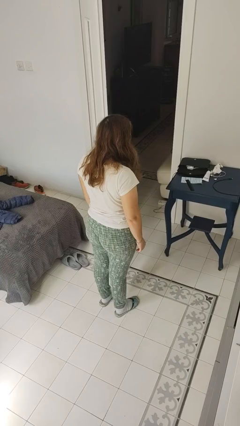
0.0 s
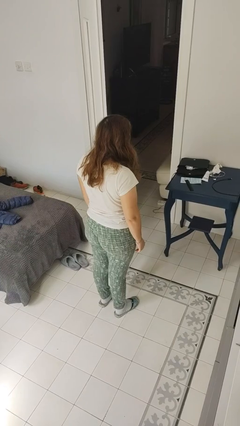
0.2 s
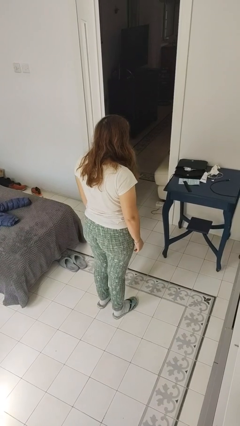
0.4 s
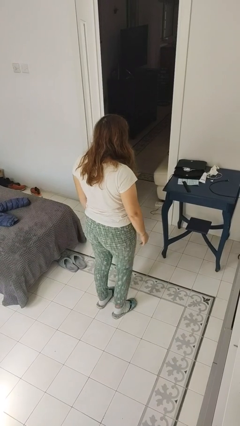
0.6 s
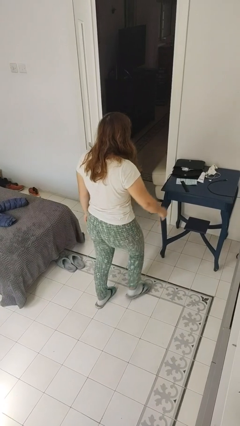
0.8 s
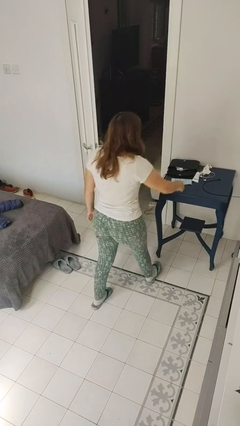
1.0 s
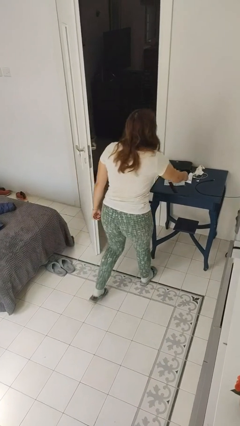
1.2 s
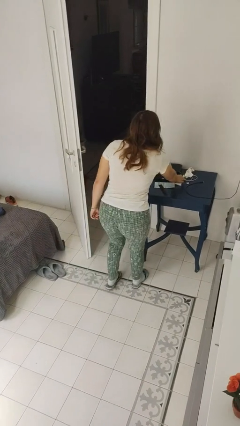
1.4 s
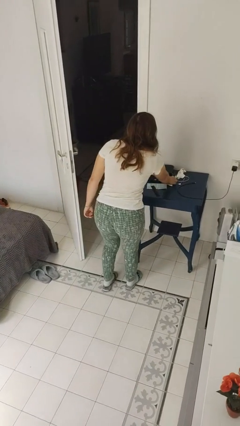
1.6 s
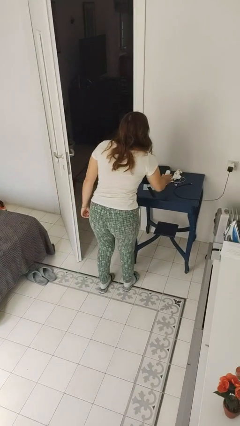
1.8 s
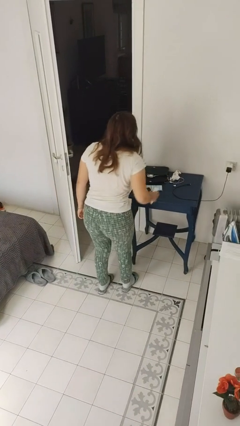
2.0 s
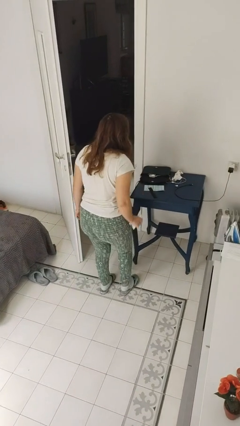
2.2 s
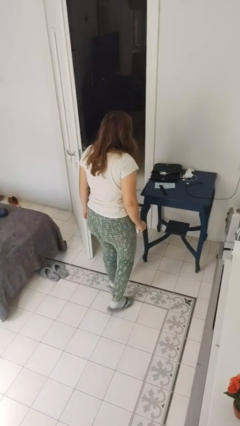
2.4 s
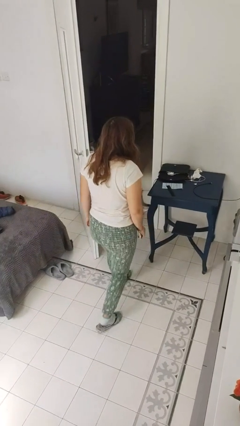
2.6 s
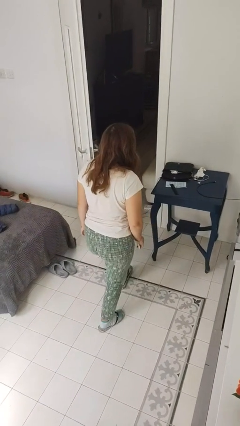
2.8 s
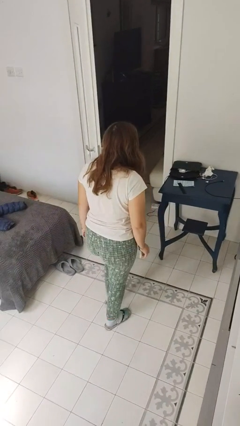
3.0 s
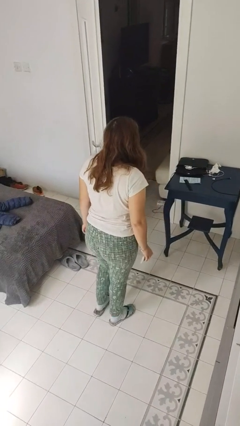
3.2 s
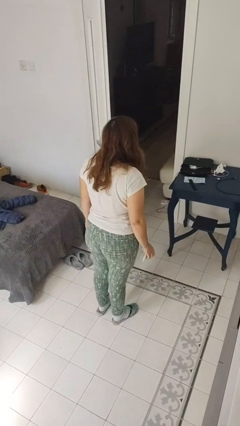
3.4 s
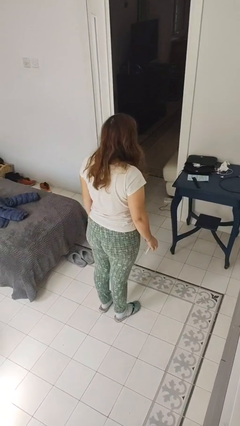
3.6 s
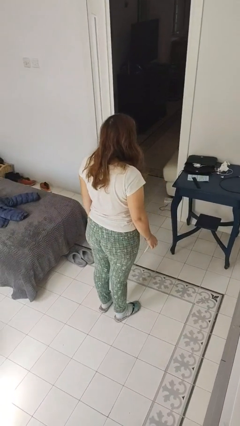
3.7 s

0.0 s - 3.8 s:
person picks up object from table

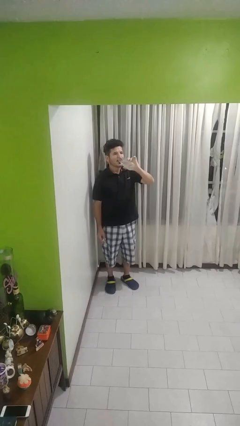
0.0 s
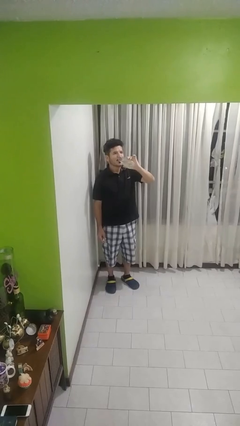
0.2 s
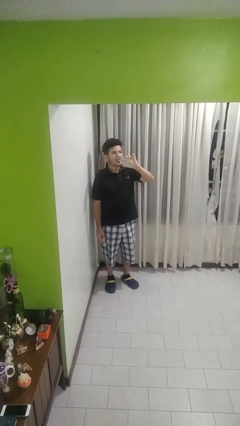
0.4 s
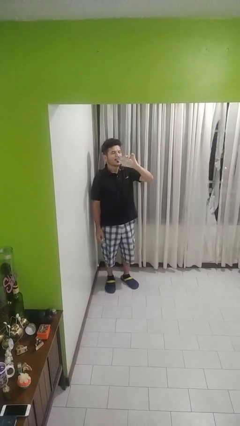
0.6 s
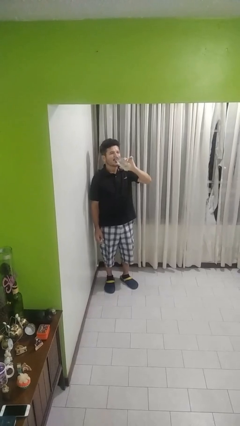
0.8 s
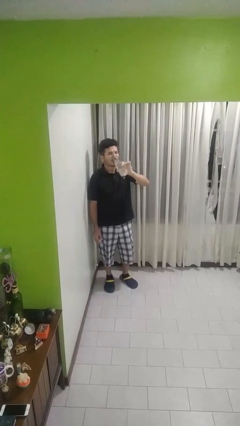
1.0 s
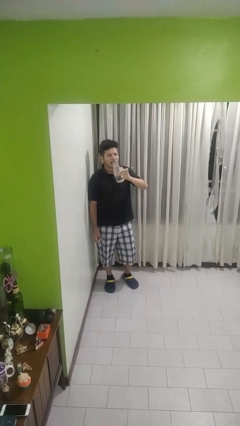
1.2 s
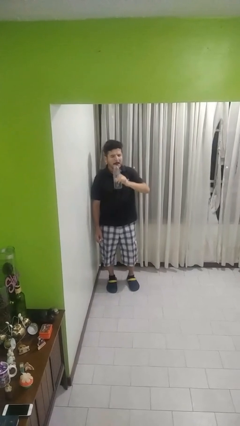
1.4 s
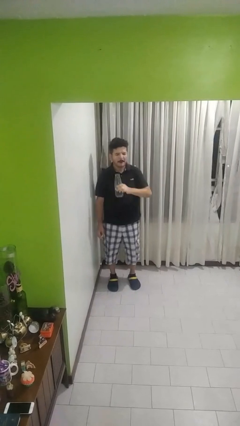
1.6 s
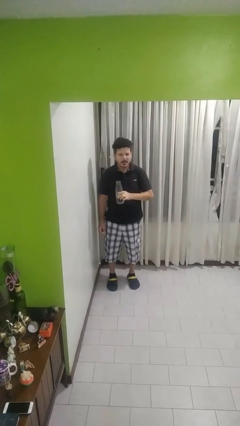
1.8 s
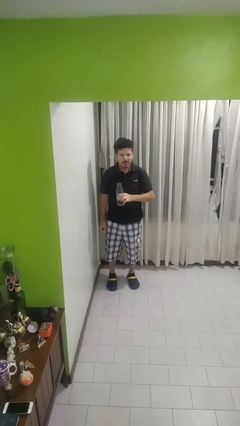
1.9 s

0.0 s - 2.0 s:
person drinks from bottle

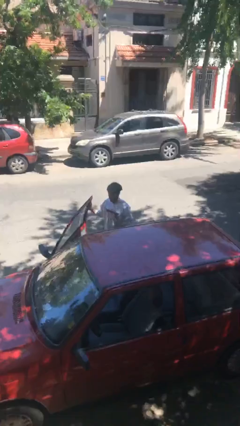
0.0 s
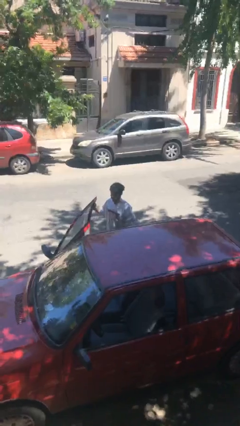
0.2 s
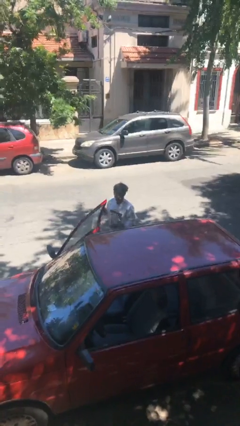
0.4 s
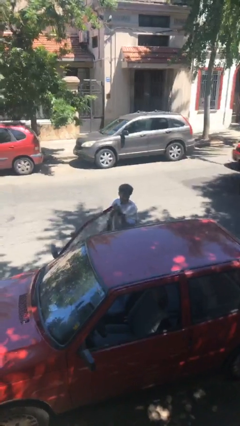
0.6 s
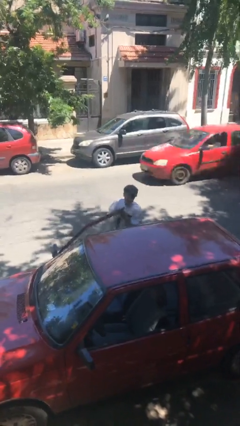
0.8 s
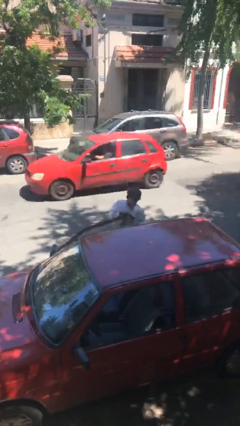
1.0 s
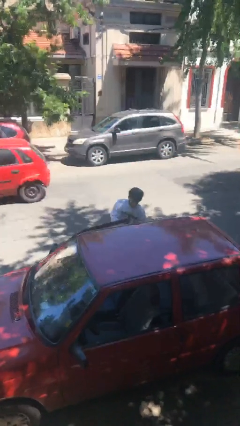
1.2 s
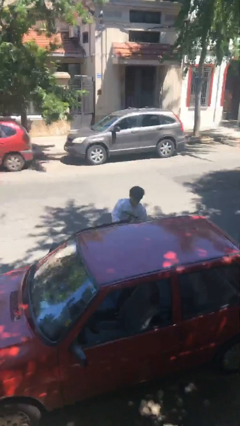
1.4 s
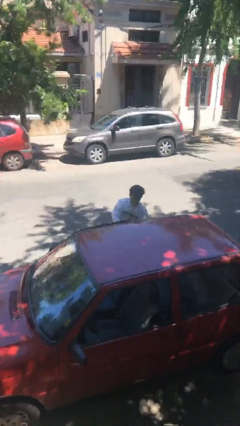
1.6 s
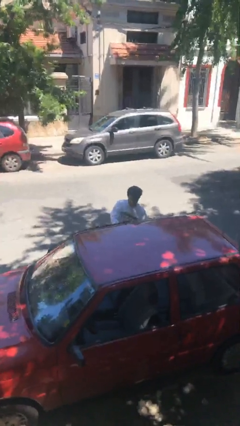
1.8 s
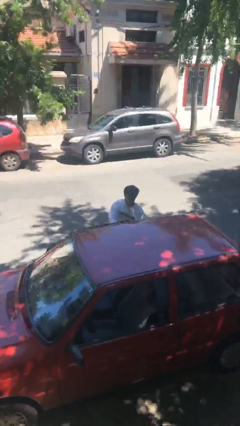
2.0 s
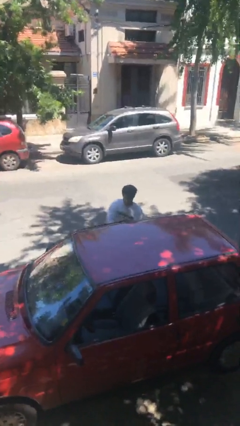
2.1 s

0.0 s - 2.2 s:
person closes car door

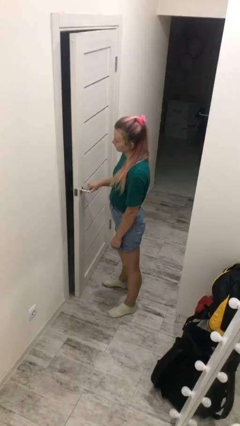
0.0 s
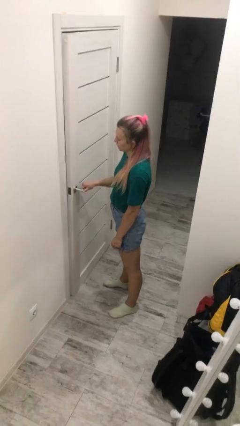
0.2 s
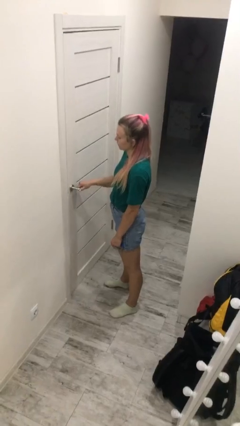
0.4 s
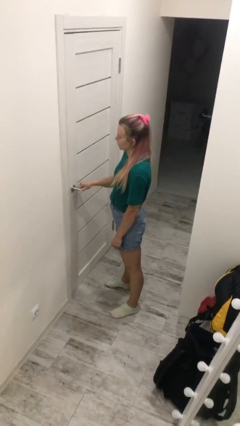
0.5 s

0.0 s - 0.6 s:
person closes facility door

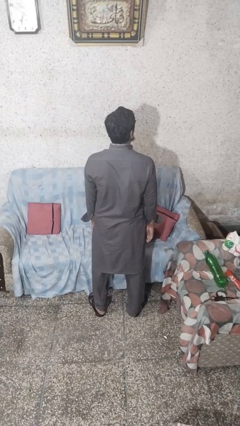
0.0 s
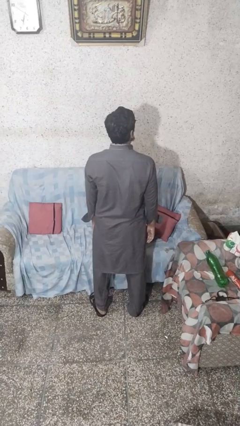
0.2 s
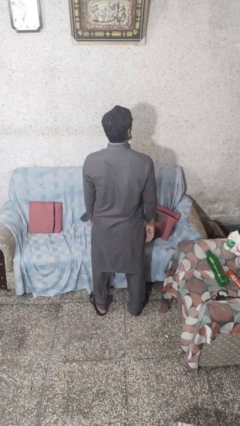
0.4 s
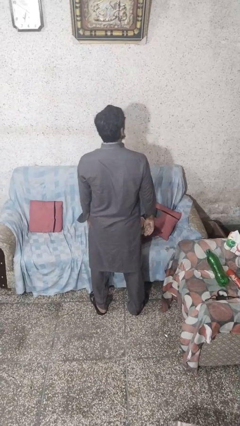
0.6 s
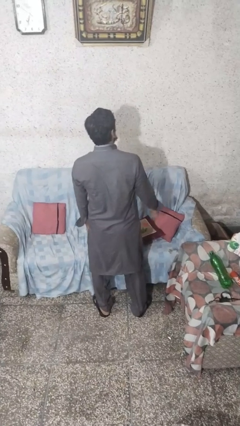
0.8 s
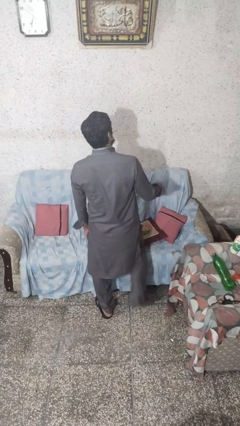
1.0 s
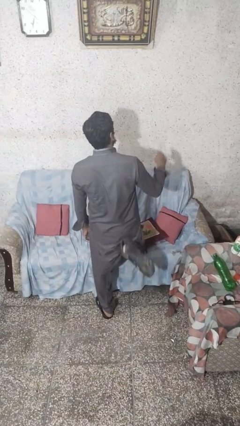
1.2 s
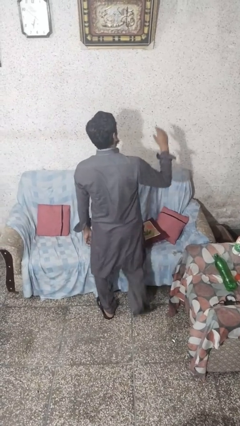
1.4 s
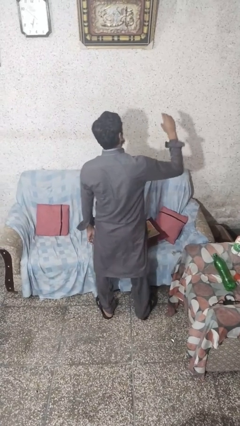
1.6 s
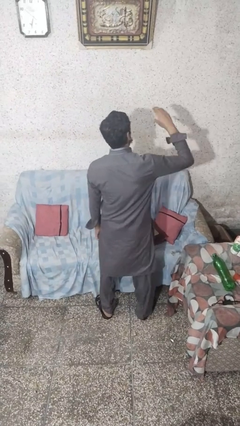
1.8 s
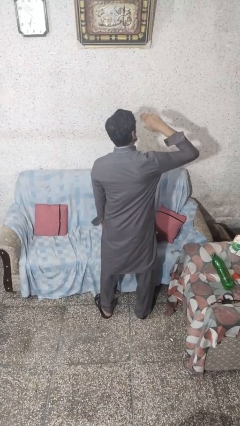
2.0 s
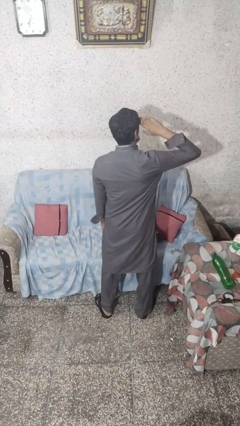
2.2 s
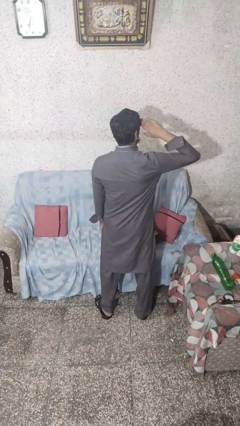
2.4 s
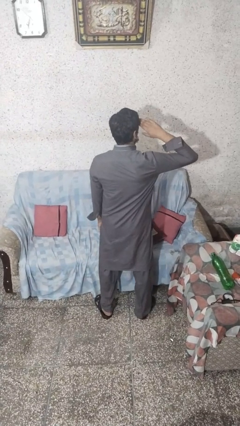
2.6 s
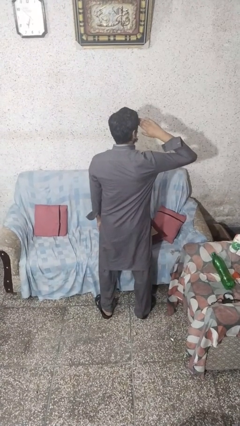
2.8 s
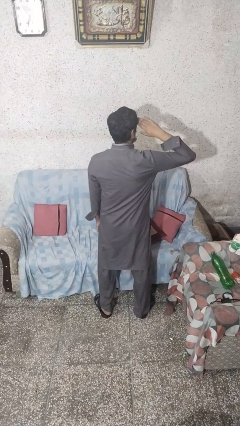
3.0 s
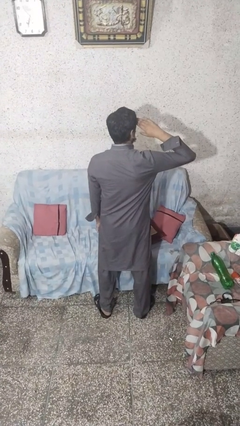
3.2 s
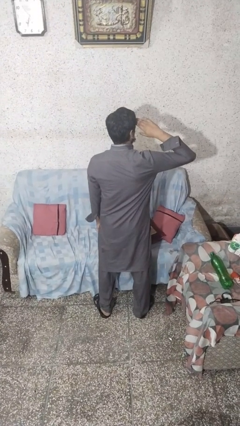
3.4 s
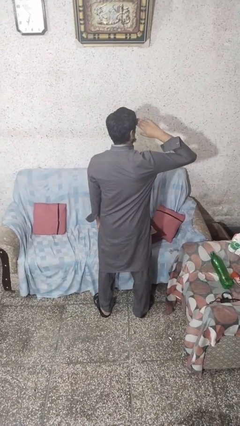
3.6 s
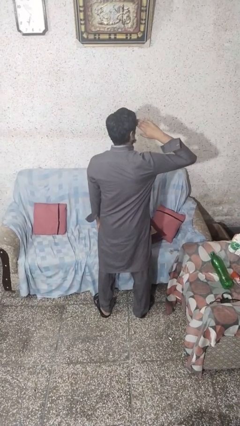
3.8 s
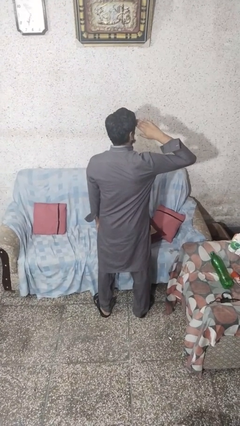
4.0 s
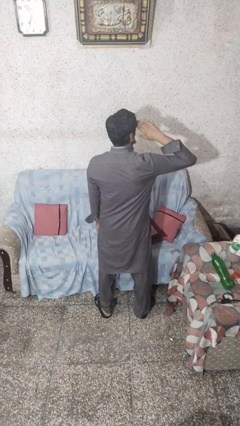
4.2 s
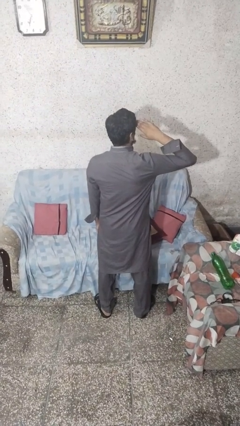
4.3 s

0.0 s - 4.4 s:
person salutes

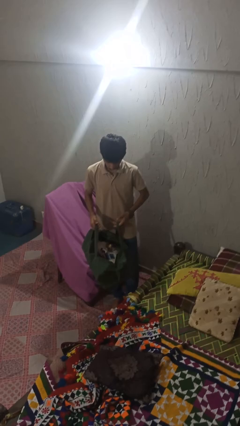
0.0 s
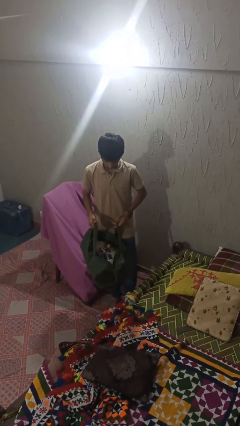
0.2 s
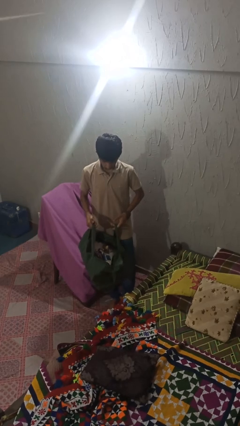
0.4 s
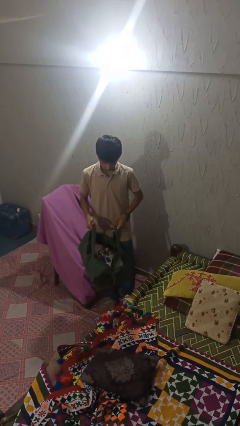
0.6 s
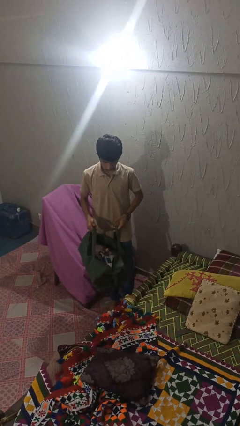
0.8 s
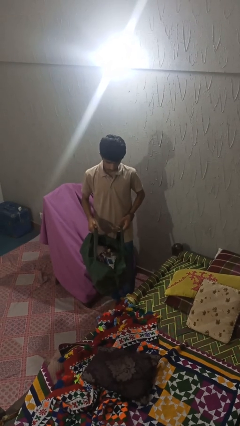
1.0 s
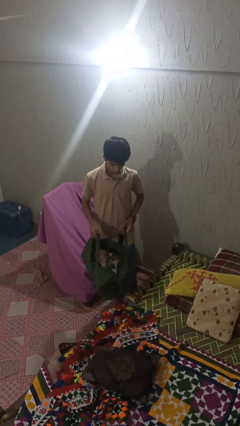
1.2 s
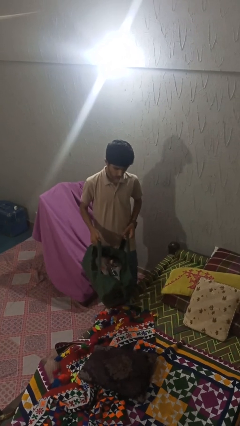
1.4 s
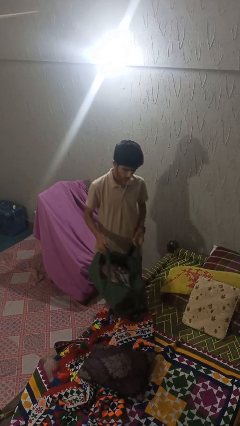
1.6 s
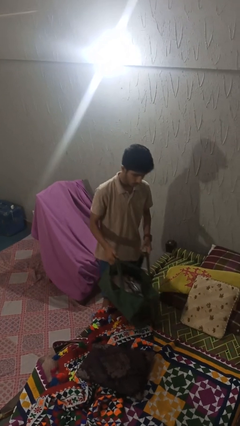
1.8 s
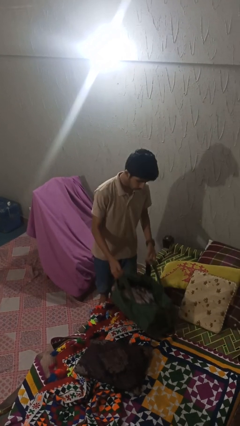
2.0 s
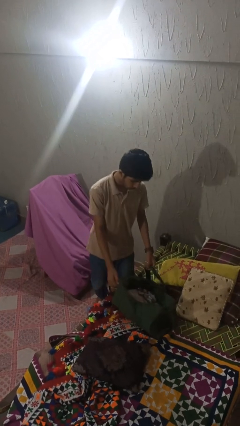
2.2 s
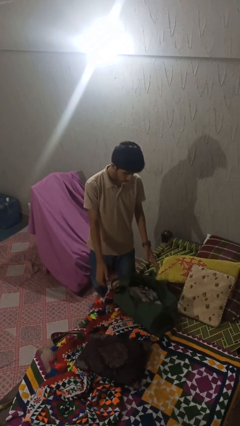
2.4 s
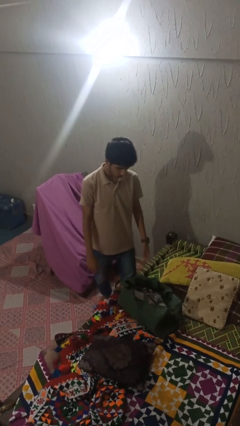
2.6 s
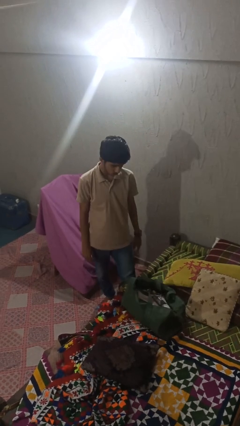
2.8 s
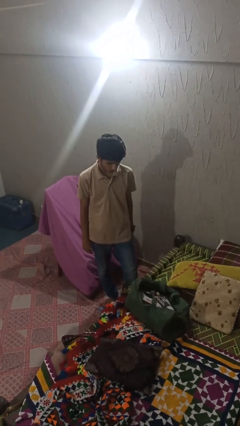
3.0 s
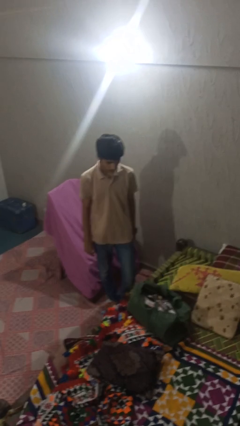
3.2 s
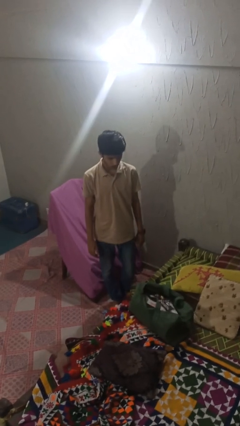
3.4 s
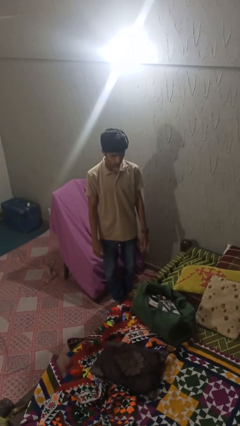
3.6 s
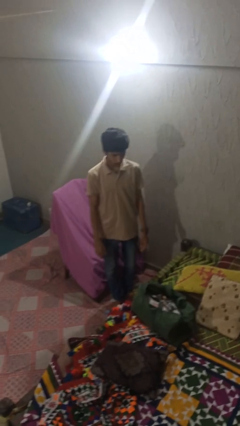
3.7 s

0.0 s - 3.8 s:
person puts down object on bed

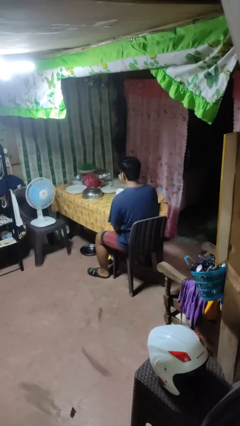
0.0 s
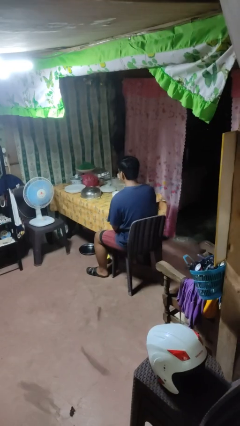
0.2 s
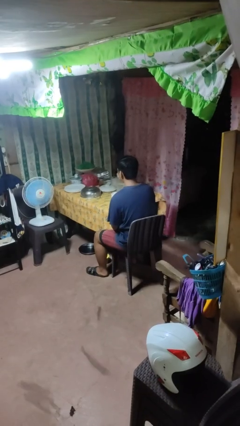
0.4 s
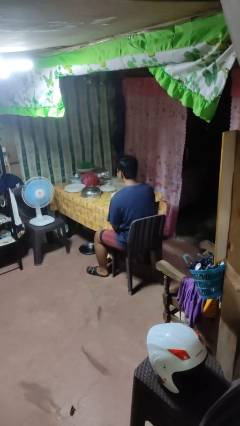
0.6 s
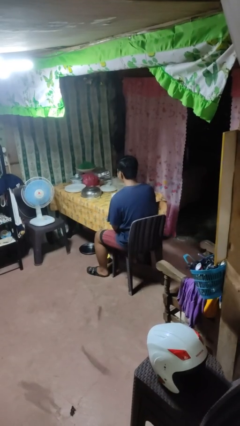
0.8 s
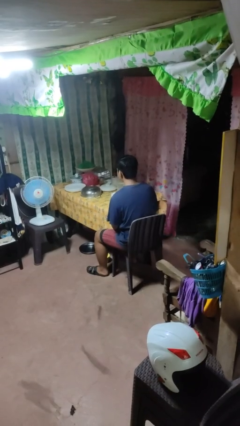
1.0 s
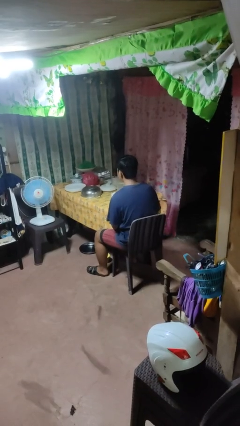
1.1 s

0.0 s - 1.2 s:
person puts down object on table
